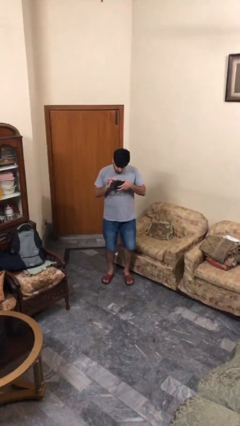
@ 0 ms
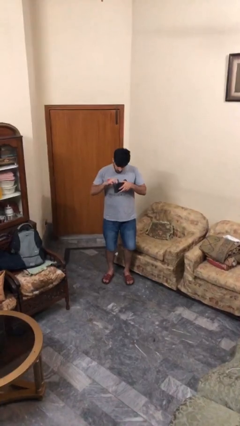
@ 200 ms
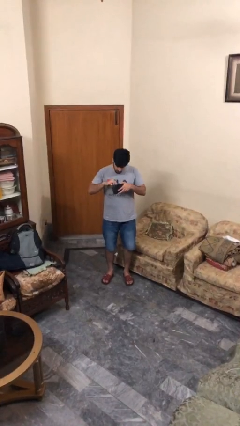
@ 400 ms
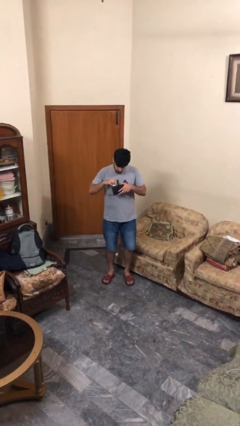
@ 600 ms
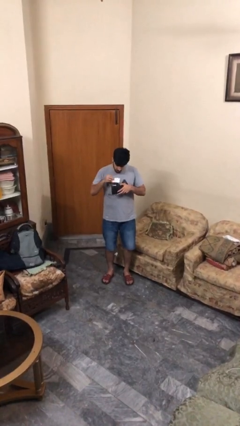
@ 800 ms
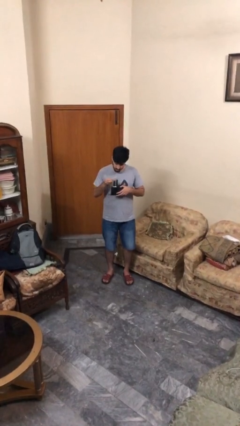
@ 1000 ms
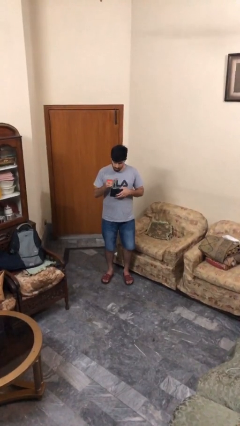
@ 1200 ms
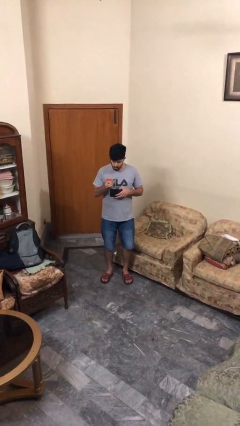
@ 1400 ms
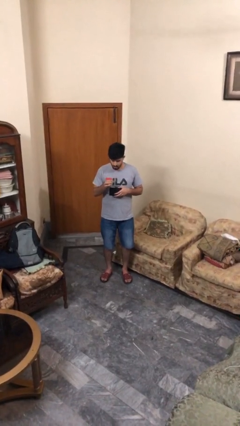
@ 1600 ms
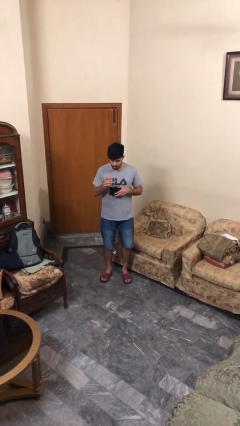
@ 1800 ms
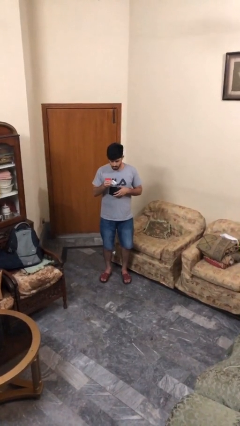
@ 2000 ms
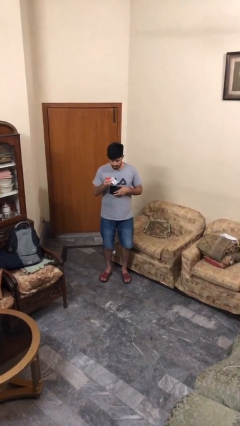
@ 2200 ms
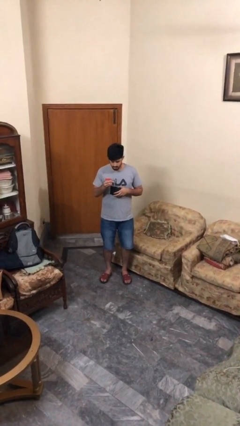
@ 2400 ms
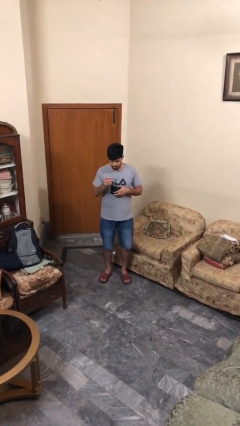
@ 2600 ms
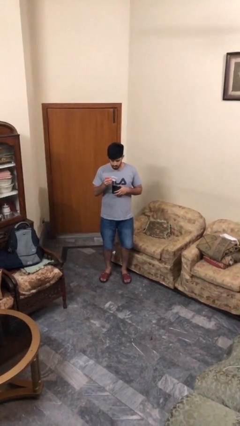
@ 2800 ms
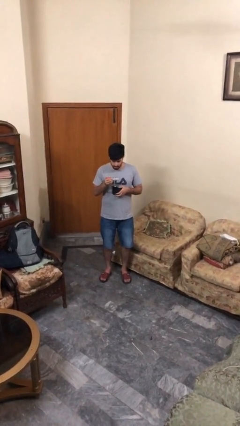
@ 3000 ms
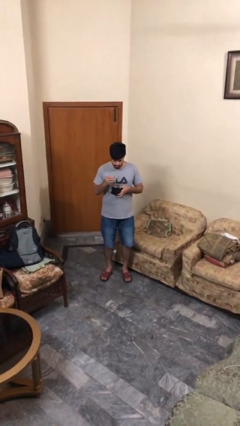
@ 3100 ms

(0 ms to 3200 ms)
person takes object from purse

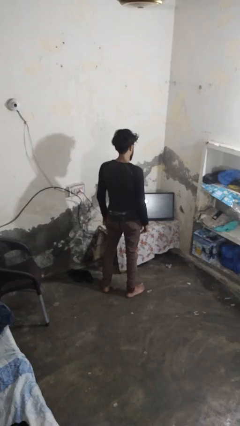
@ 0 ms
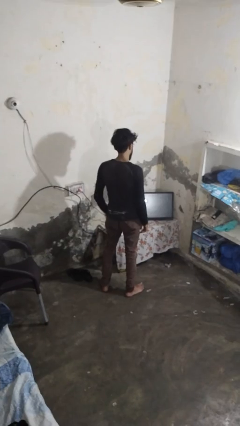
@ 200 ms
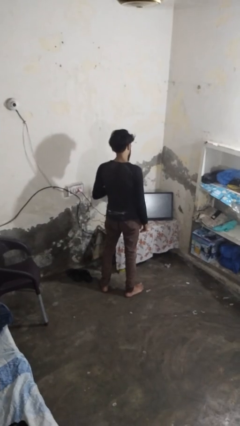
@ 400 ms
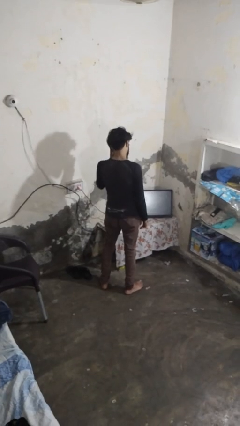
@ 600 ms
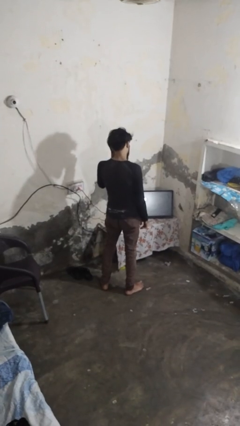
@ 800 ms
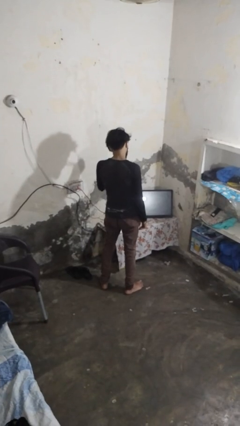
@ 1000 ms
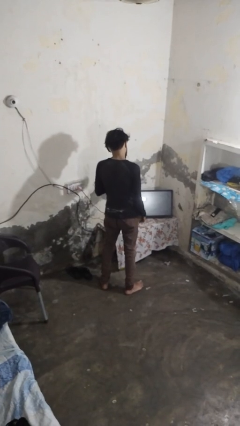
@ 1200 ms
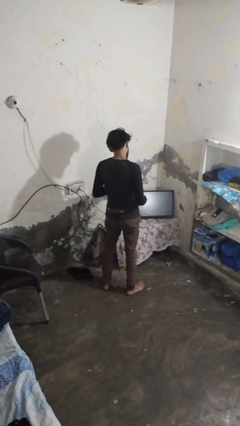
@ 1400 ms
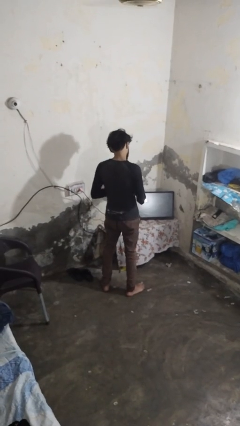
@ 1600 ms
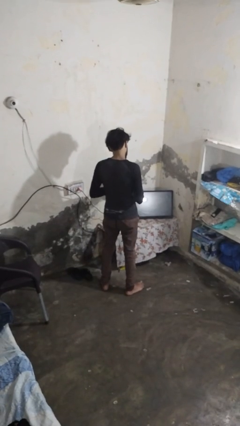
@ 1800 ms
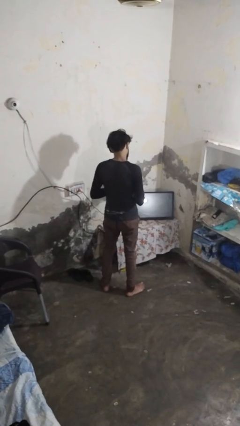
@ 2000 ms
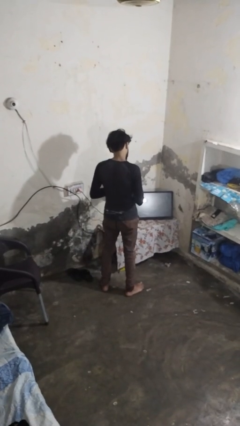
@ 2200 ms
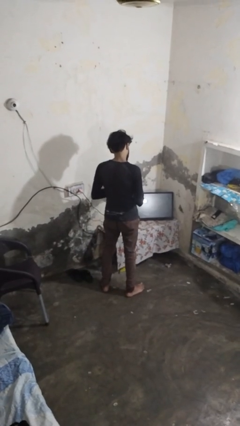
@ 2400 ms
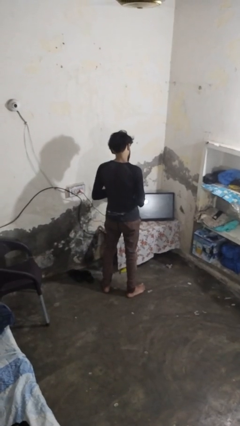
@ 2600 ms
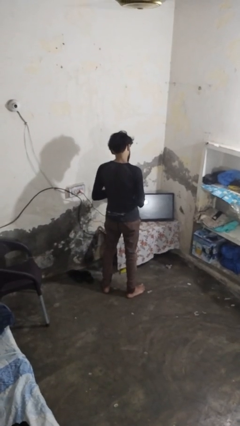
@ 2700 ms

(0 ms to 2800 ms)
person takes off glasses

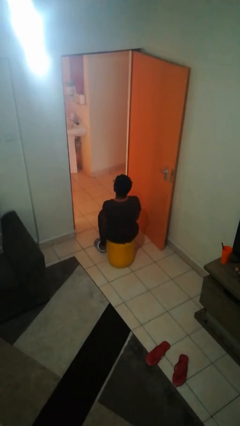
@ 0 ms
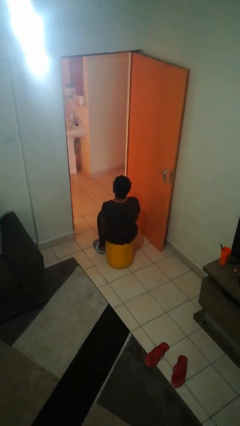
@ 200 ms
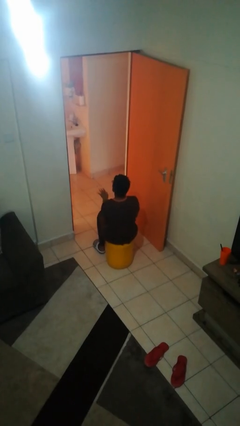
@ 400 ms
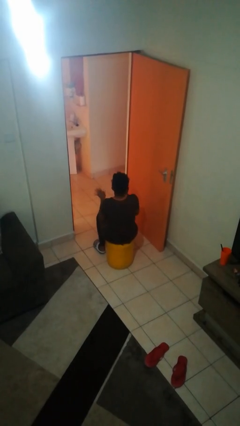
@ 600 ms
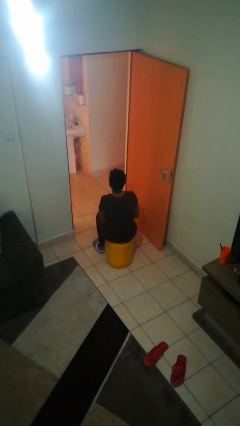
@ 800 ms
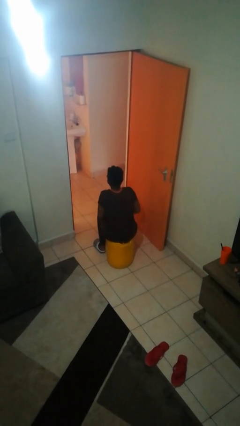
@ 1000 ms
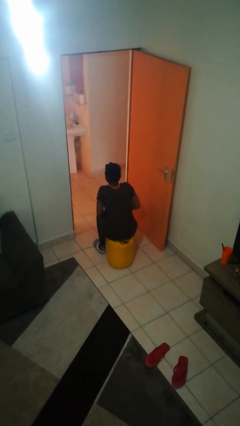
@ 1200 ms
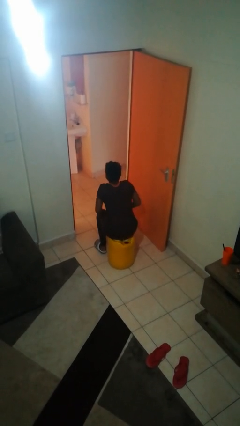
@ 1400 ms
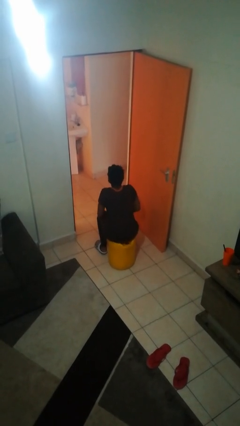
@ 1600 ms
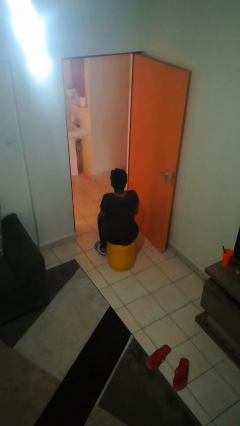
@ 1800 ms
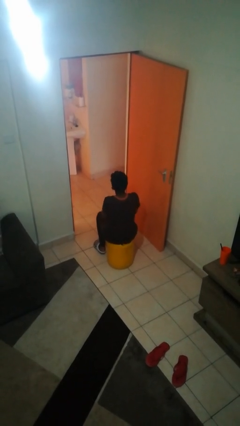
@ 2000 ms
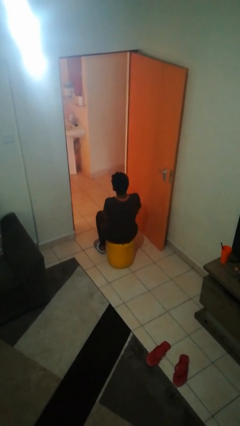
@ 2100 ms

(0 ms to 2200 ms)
person slaps hands on thighs

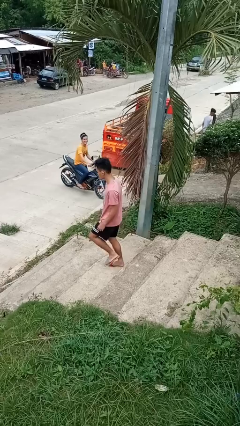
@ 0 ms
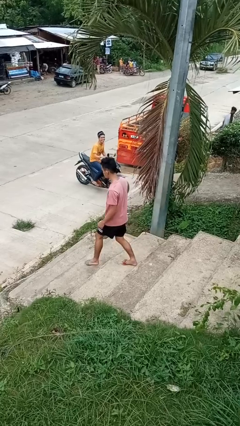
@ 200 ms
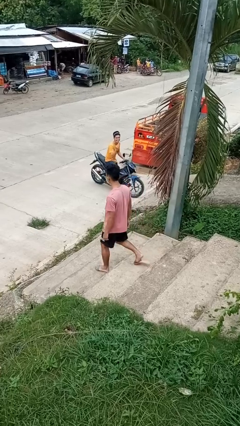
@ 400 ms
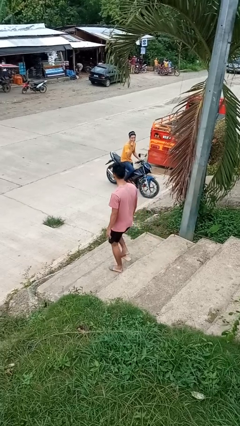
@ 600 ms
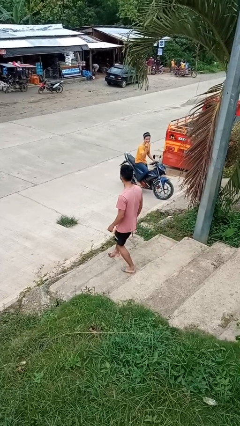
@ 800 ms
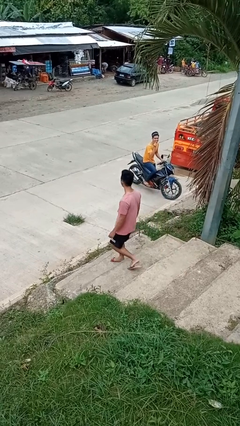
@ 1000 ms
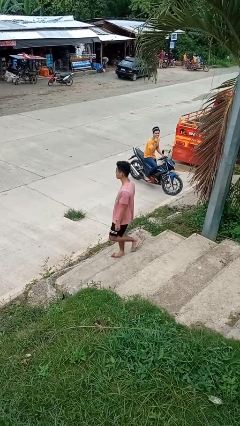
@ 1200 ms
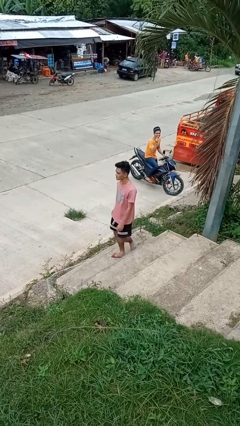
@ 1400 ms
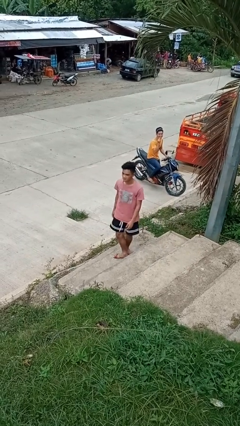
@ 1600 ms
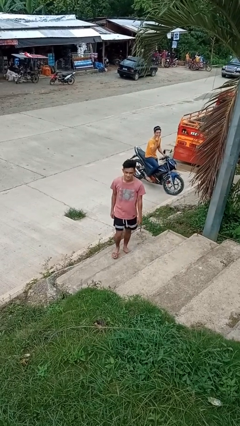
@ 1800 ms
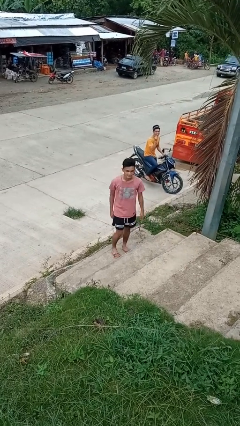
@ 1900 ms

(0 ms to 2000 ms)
person climbs down stairs

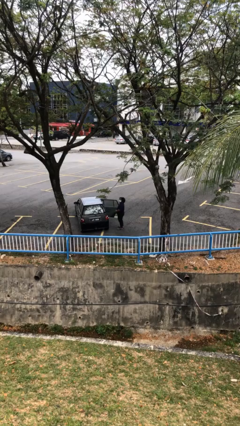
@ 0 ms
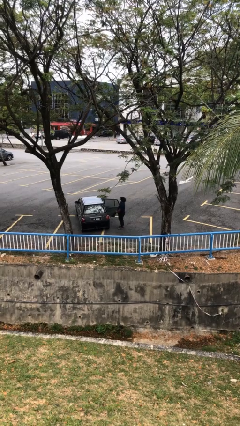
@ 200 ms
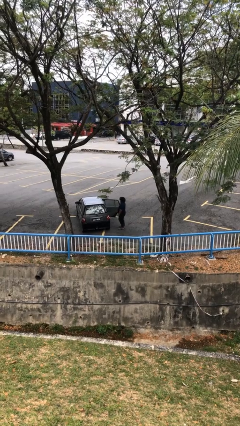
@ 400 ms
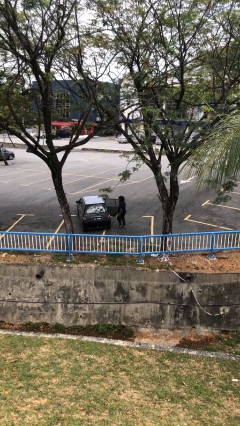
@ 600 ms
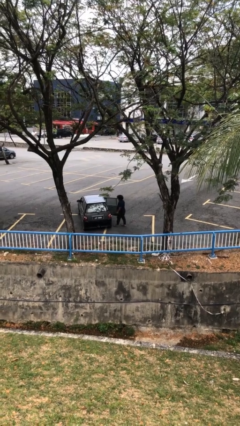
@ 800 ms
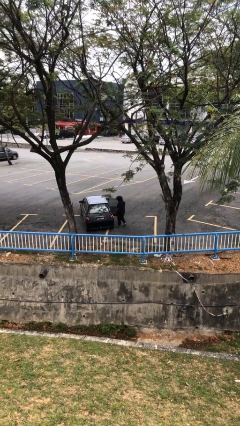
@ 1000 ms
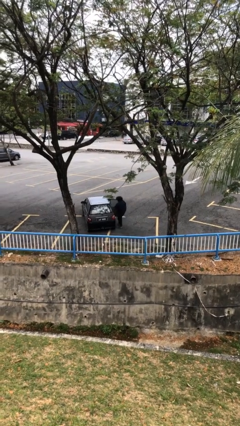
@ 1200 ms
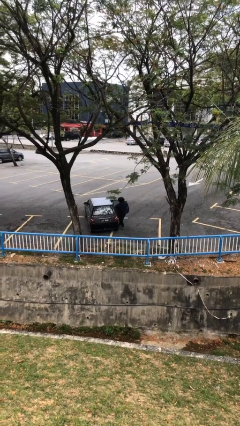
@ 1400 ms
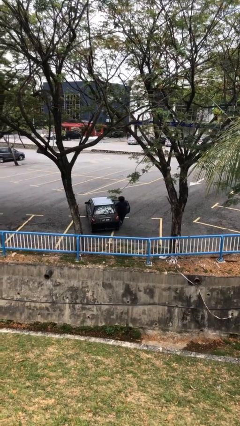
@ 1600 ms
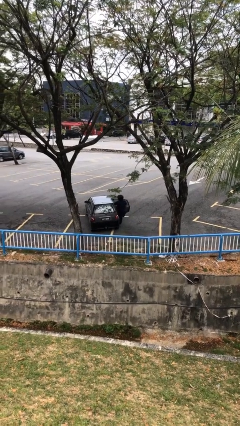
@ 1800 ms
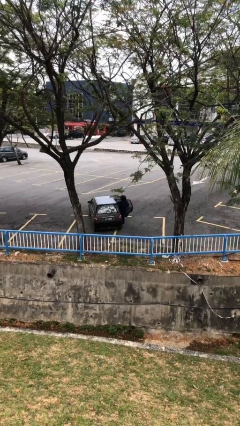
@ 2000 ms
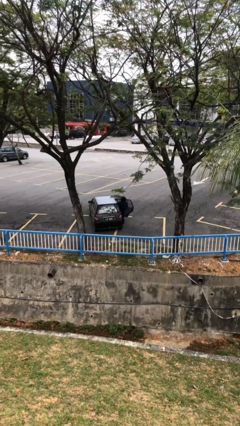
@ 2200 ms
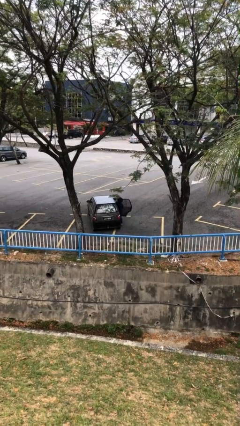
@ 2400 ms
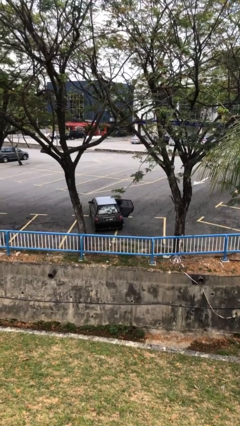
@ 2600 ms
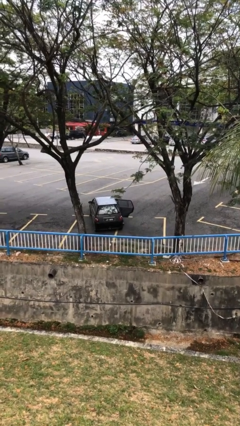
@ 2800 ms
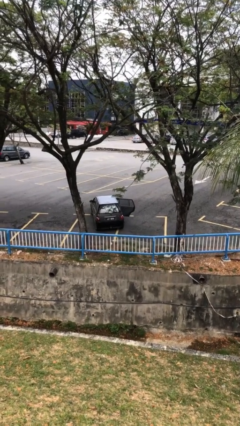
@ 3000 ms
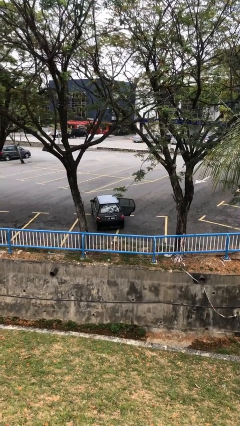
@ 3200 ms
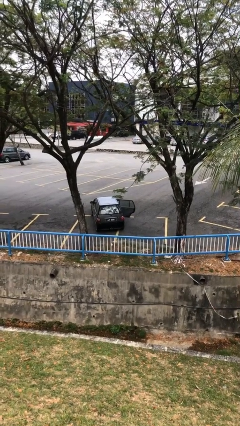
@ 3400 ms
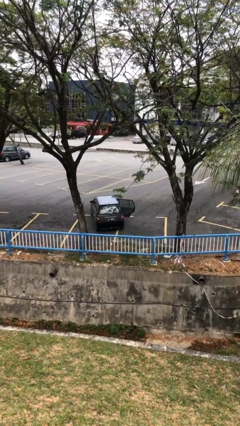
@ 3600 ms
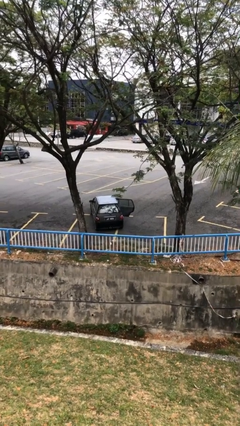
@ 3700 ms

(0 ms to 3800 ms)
person enters car

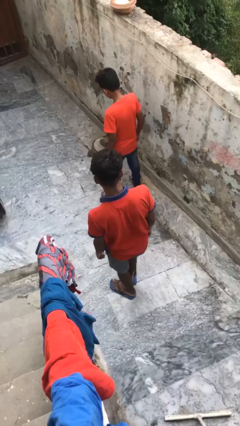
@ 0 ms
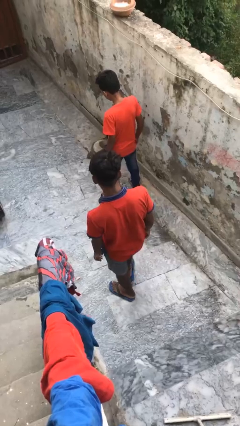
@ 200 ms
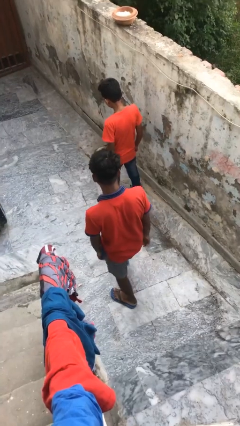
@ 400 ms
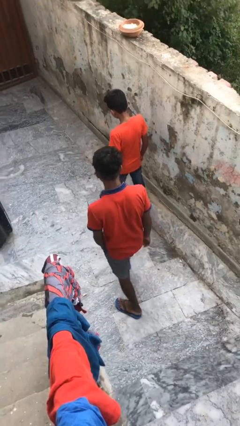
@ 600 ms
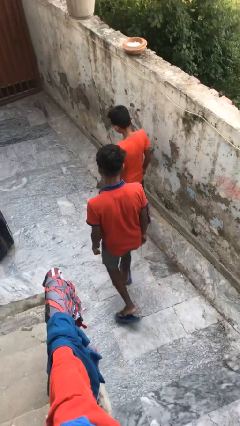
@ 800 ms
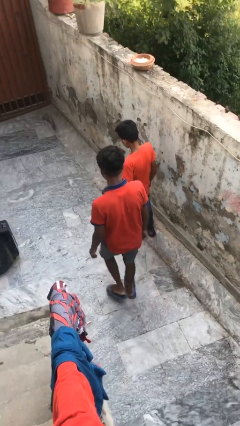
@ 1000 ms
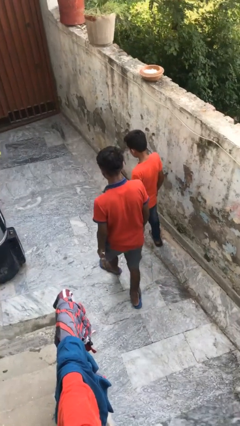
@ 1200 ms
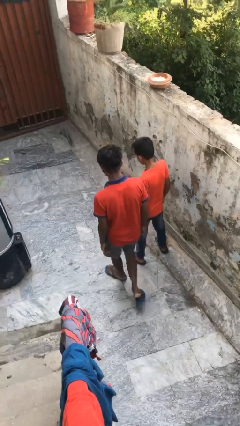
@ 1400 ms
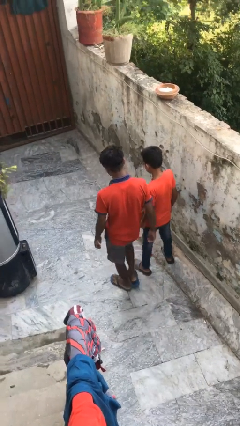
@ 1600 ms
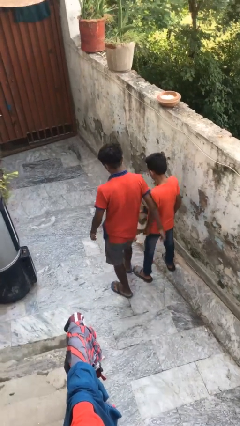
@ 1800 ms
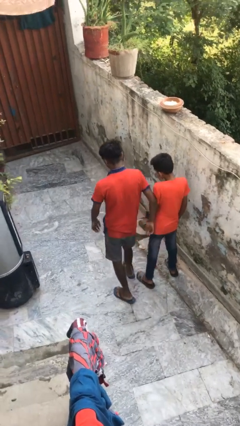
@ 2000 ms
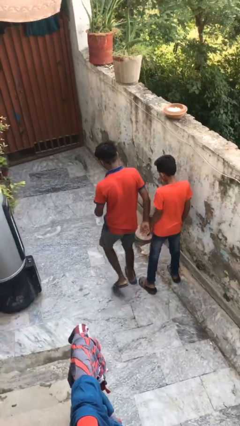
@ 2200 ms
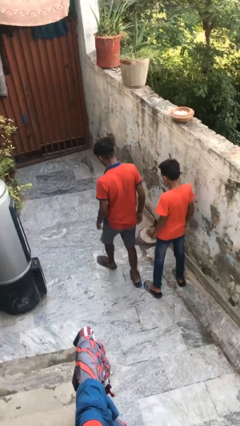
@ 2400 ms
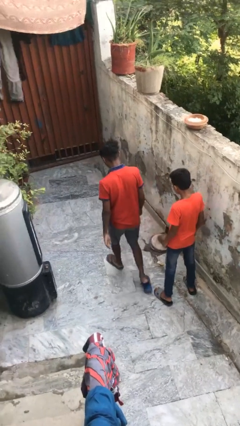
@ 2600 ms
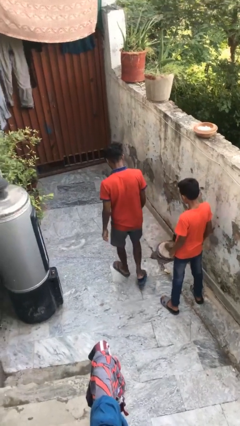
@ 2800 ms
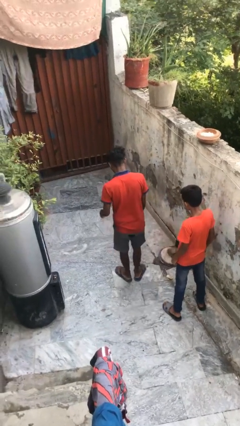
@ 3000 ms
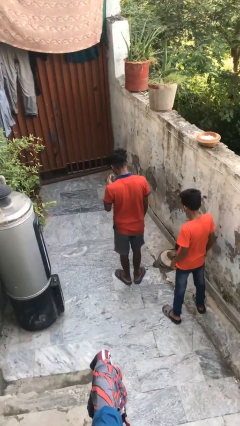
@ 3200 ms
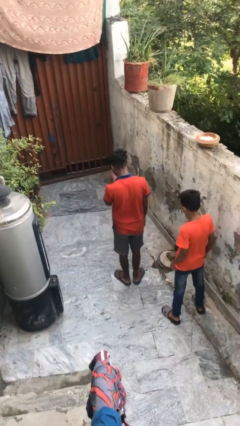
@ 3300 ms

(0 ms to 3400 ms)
person bumps into person
